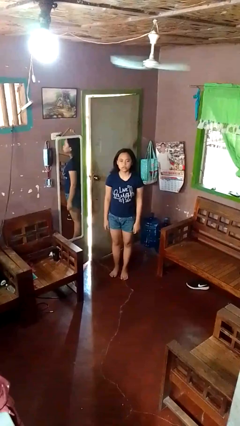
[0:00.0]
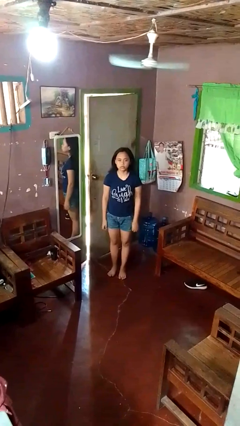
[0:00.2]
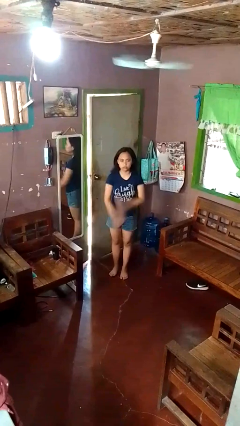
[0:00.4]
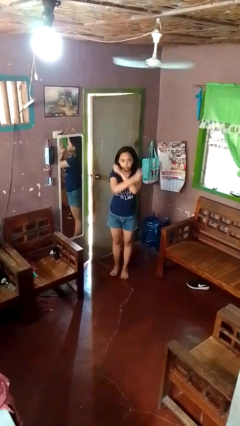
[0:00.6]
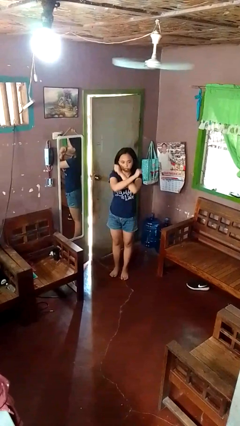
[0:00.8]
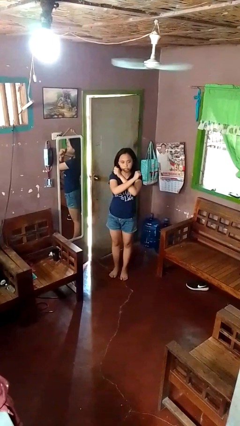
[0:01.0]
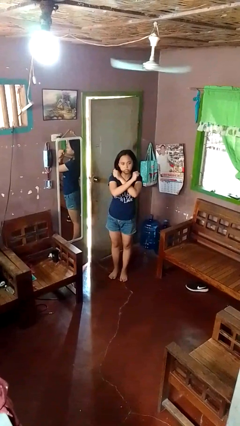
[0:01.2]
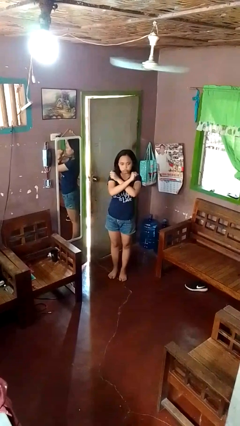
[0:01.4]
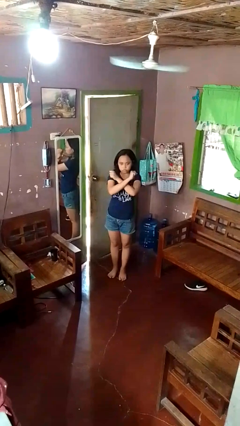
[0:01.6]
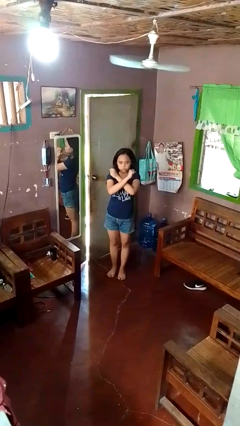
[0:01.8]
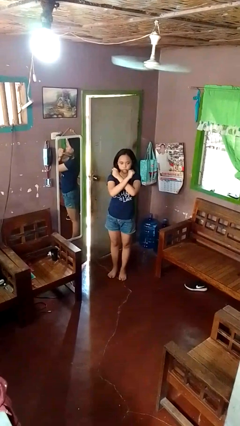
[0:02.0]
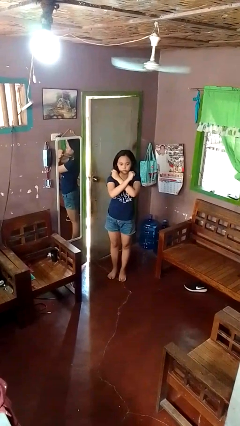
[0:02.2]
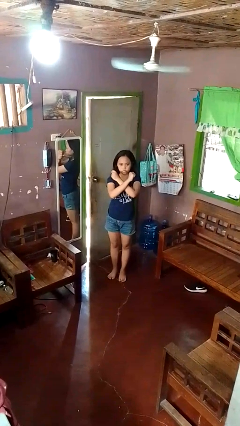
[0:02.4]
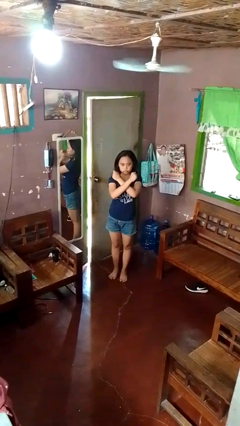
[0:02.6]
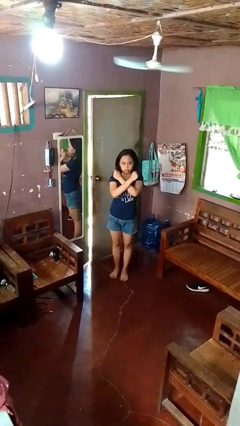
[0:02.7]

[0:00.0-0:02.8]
person gestures arms x

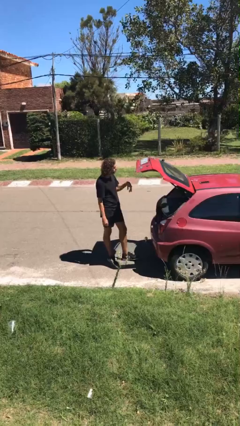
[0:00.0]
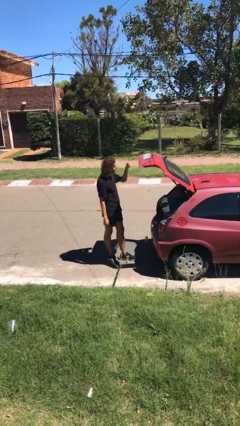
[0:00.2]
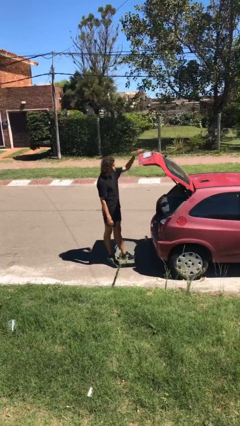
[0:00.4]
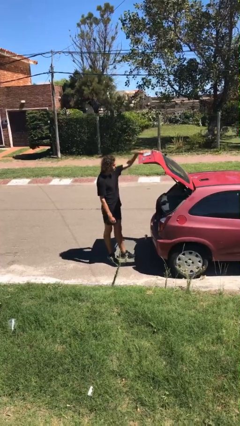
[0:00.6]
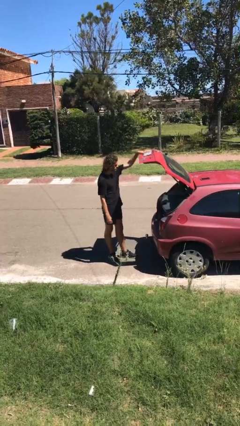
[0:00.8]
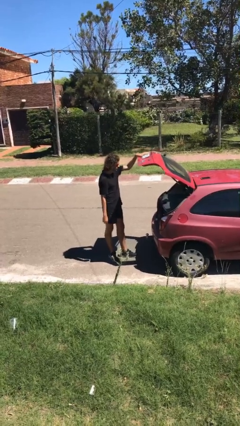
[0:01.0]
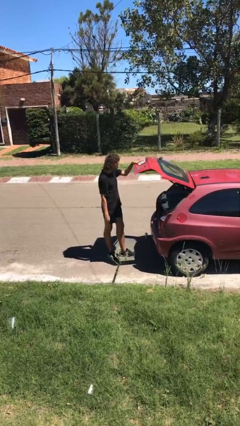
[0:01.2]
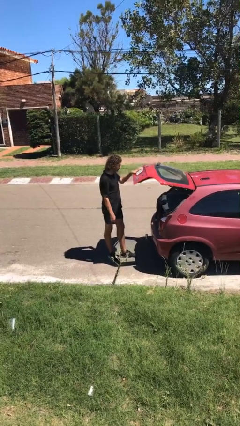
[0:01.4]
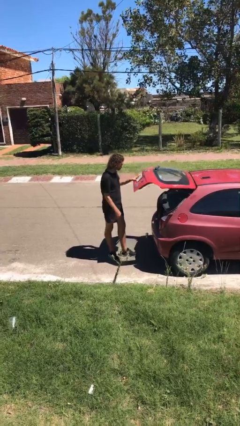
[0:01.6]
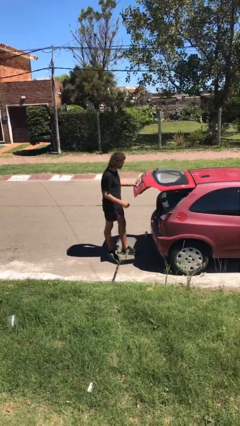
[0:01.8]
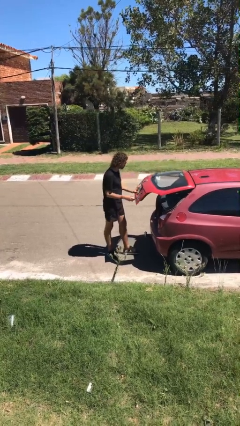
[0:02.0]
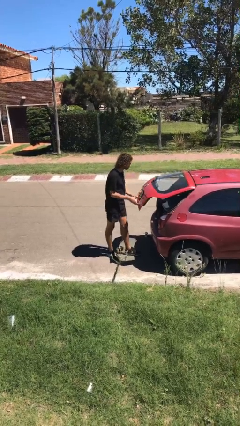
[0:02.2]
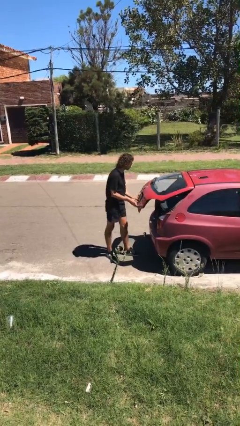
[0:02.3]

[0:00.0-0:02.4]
person closes car trunk

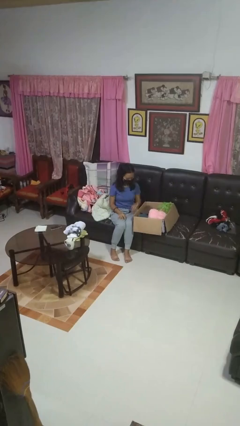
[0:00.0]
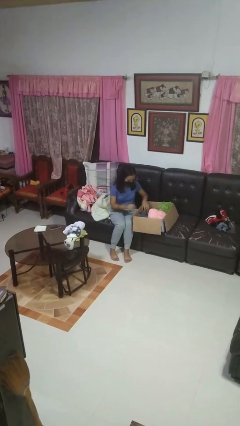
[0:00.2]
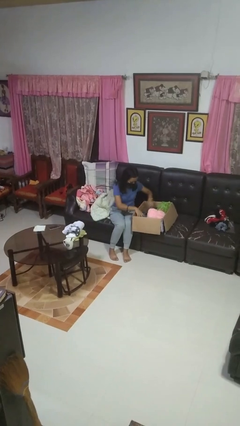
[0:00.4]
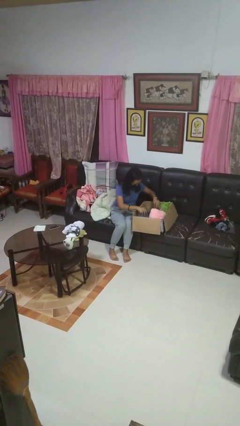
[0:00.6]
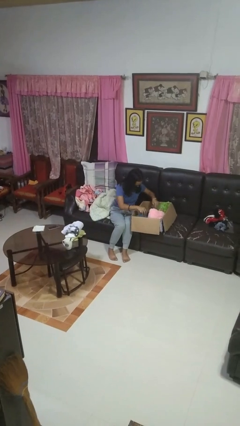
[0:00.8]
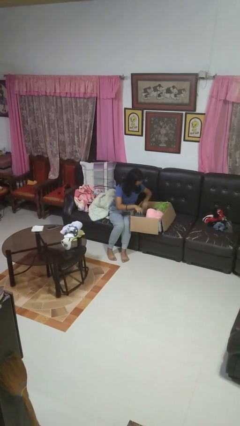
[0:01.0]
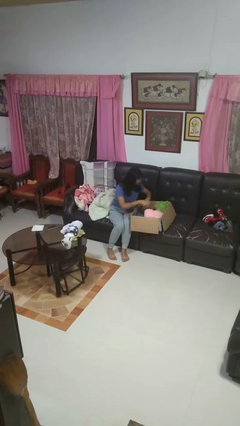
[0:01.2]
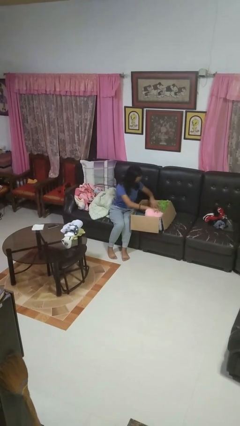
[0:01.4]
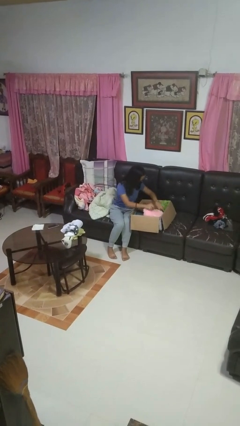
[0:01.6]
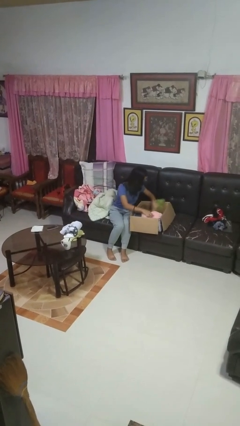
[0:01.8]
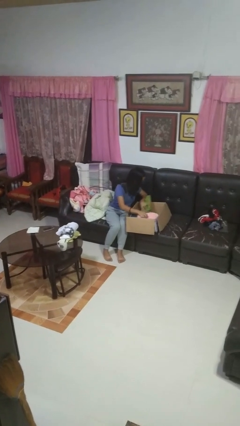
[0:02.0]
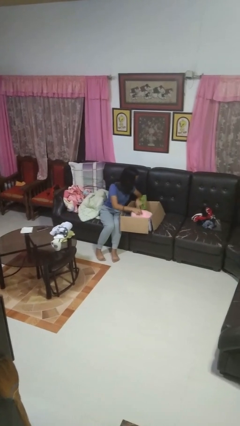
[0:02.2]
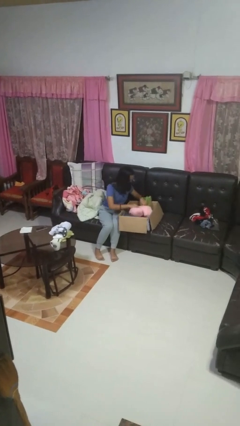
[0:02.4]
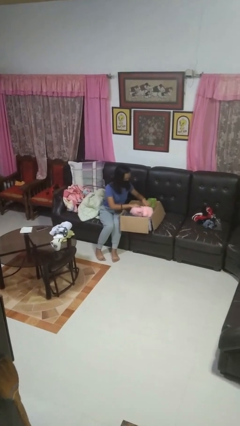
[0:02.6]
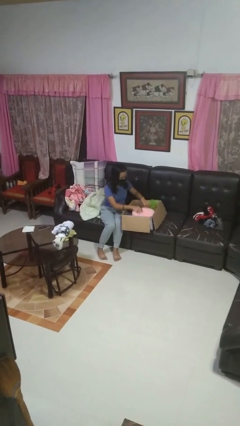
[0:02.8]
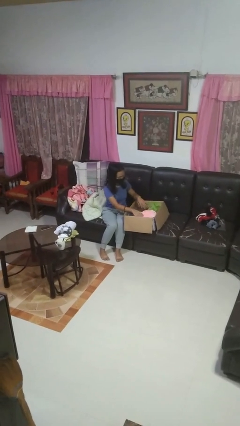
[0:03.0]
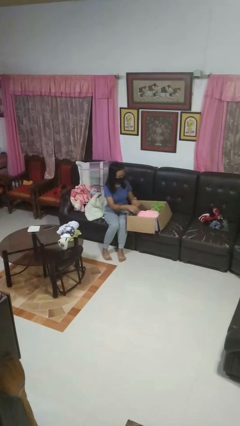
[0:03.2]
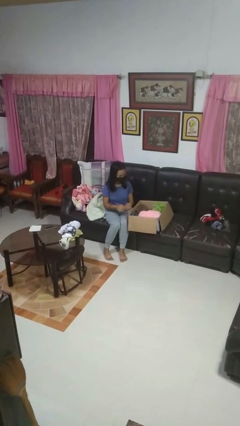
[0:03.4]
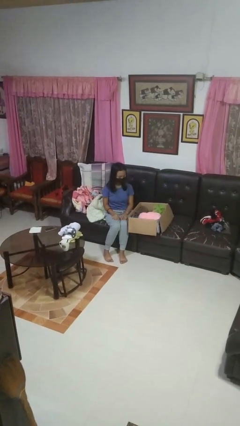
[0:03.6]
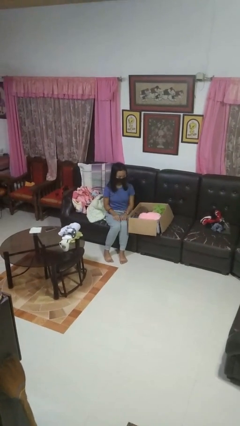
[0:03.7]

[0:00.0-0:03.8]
person searches in box

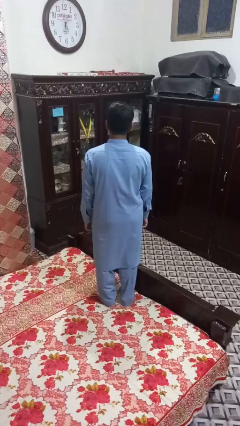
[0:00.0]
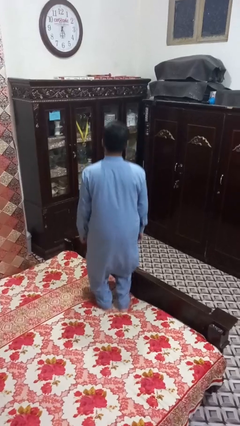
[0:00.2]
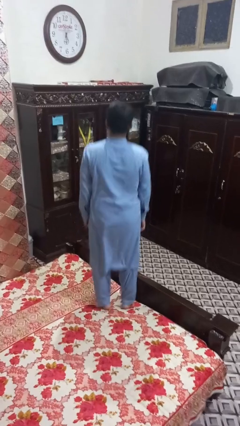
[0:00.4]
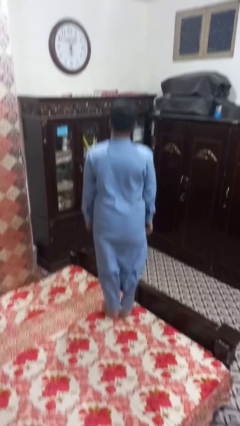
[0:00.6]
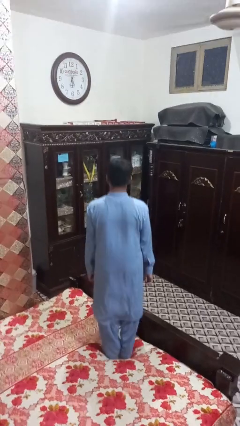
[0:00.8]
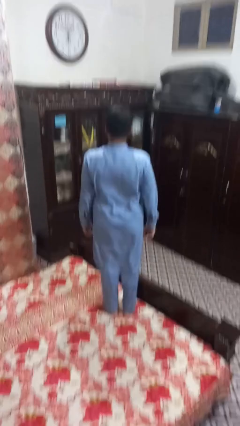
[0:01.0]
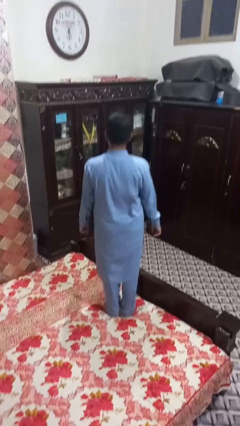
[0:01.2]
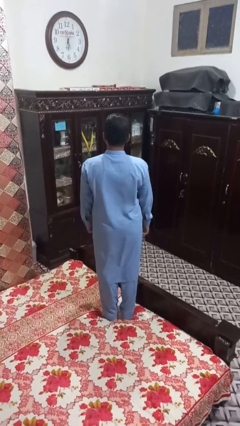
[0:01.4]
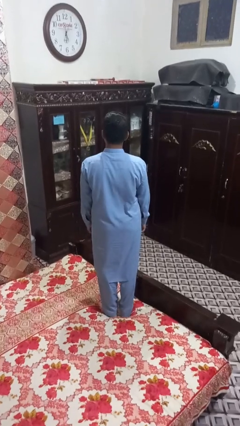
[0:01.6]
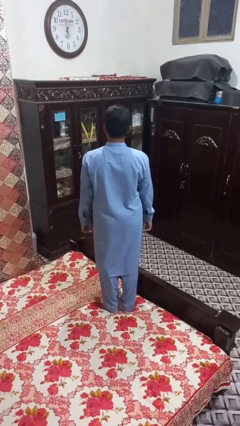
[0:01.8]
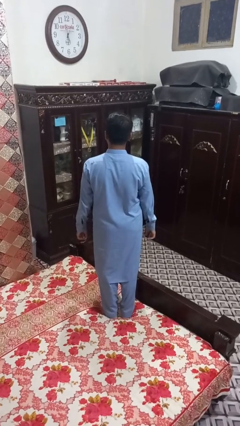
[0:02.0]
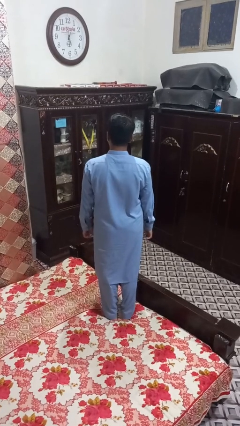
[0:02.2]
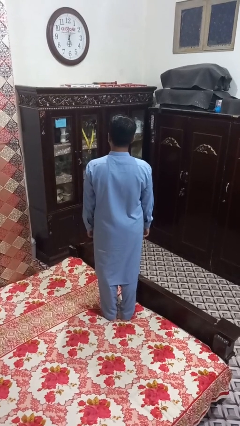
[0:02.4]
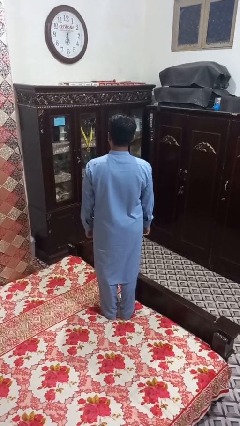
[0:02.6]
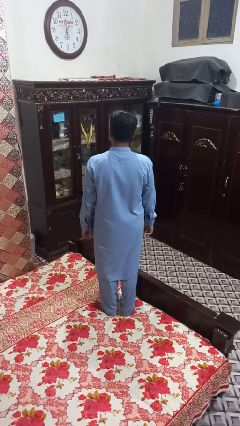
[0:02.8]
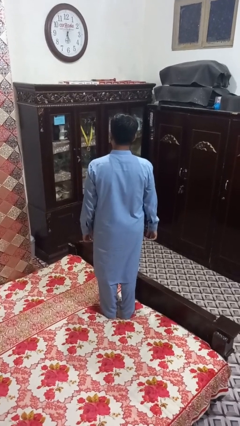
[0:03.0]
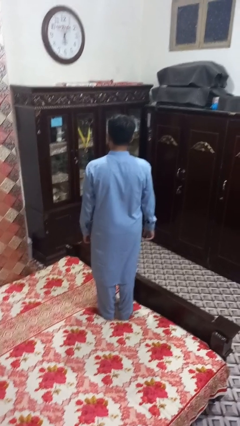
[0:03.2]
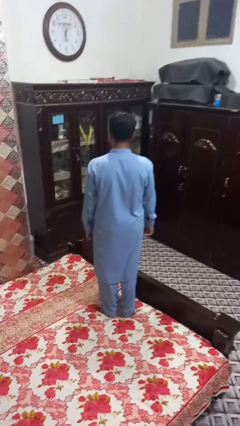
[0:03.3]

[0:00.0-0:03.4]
person jumps on bed

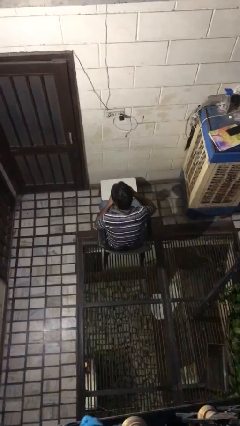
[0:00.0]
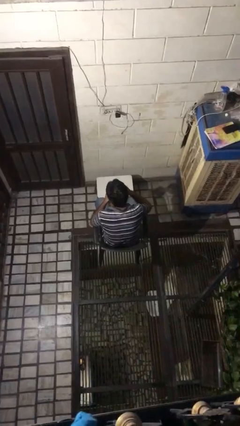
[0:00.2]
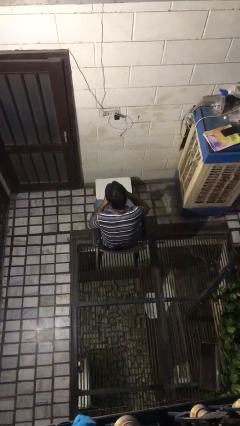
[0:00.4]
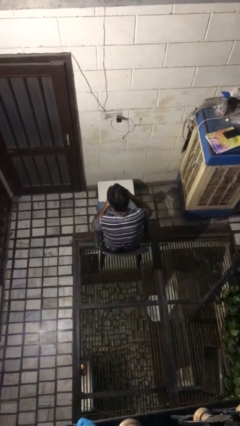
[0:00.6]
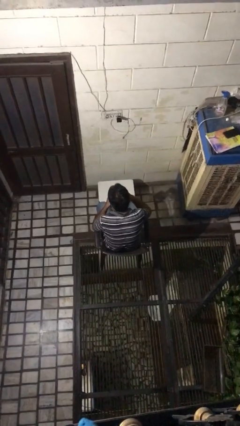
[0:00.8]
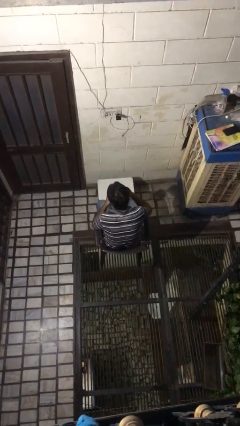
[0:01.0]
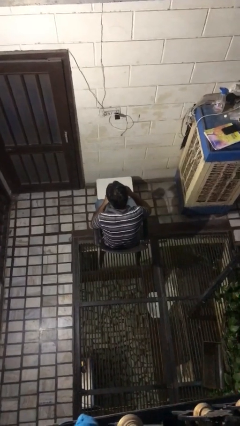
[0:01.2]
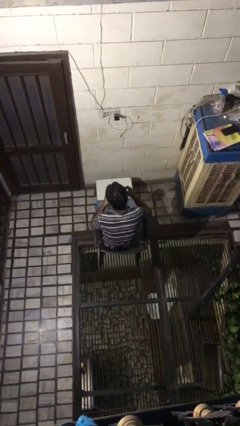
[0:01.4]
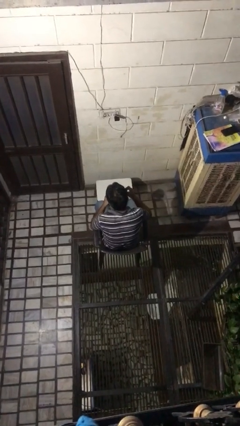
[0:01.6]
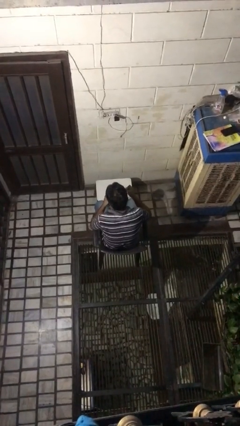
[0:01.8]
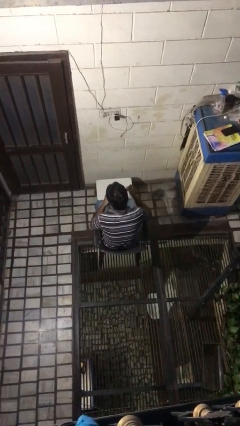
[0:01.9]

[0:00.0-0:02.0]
person stirs mug

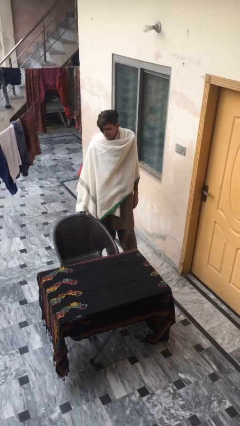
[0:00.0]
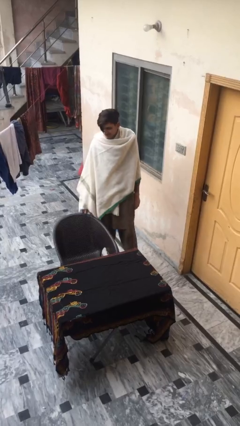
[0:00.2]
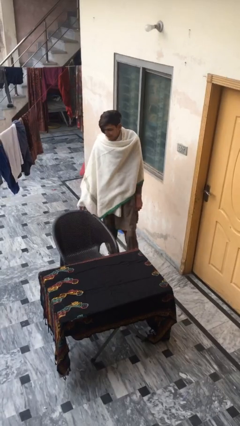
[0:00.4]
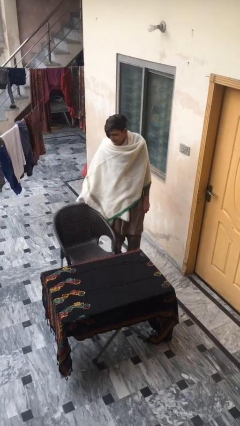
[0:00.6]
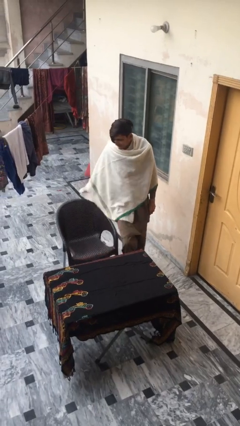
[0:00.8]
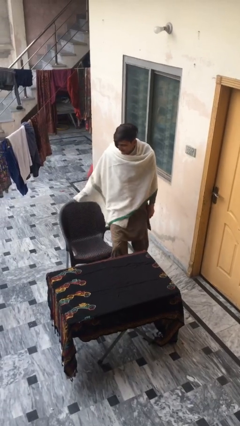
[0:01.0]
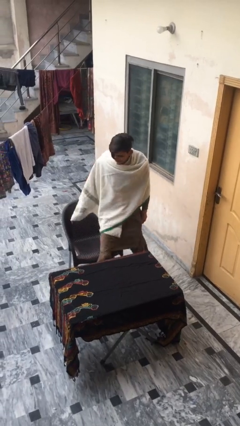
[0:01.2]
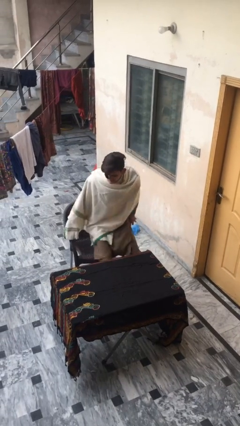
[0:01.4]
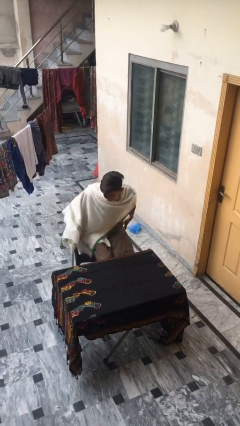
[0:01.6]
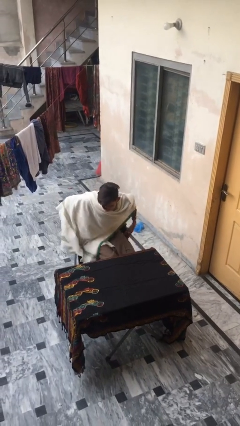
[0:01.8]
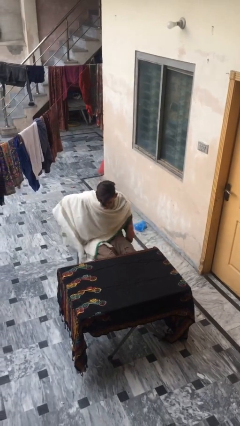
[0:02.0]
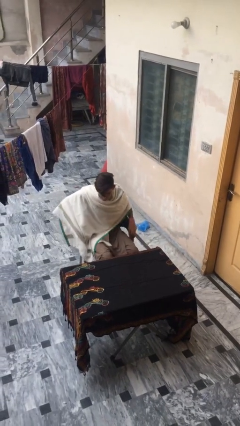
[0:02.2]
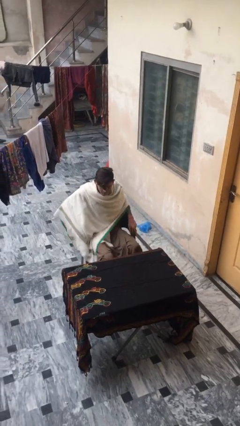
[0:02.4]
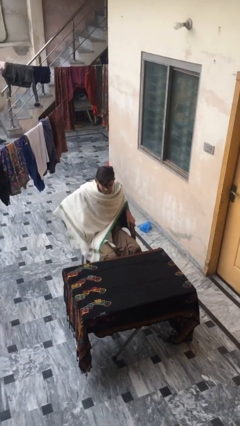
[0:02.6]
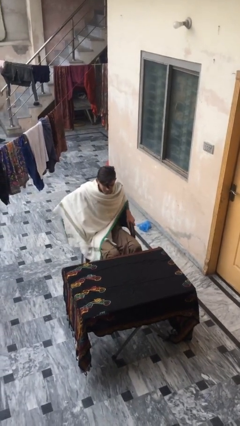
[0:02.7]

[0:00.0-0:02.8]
person sits down
